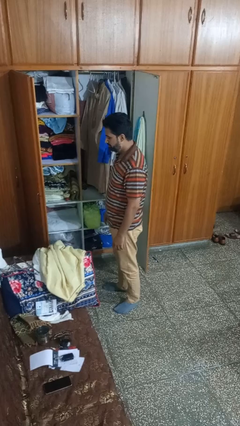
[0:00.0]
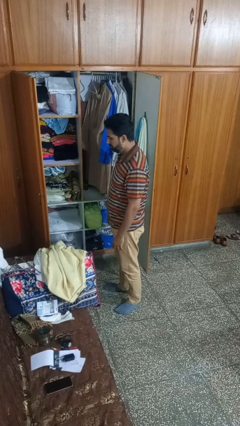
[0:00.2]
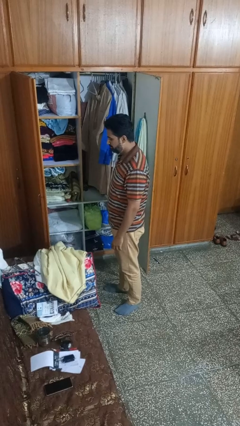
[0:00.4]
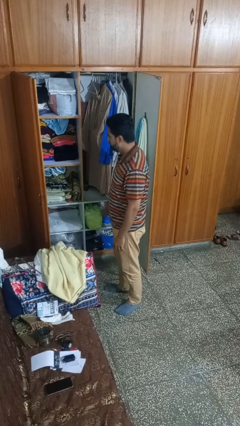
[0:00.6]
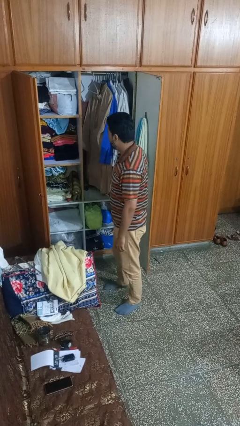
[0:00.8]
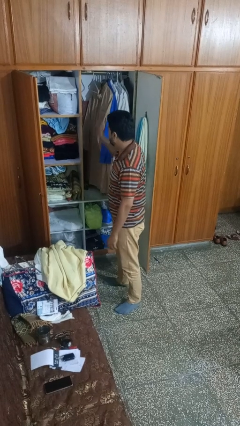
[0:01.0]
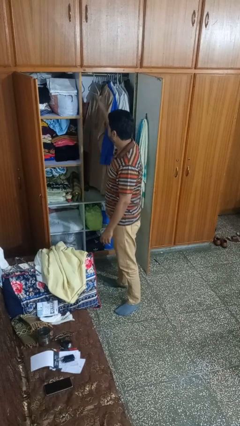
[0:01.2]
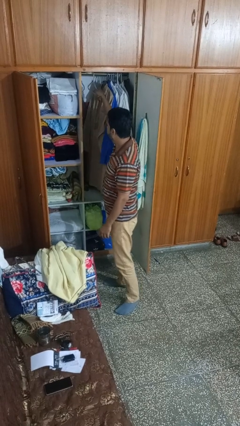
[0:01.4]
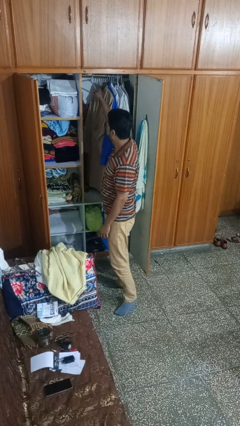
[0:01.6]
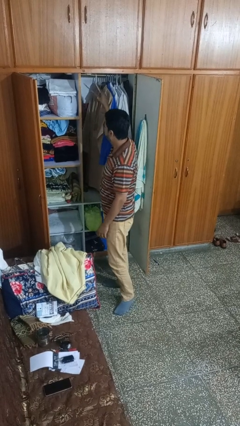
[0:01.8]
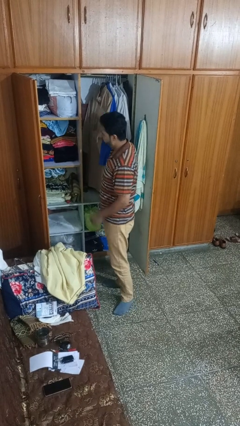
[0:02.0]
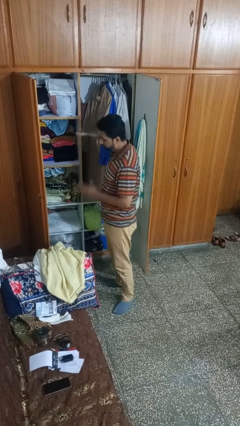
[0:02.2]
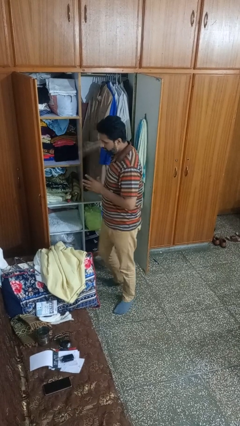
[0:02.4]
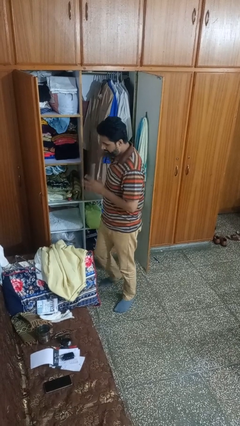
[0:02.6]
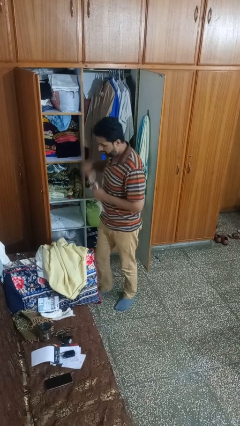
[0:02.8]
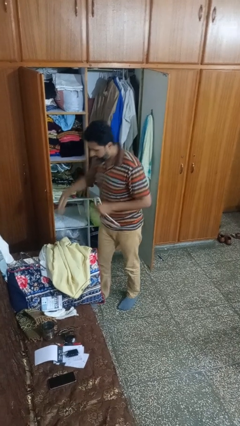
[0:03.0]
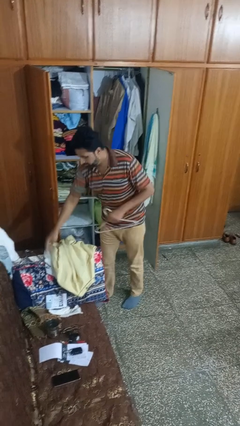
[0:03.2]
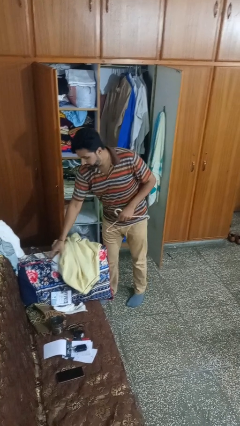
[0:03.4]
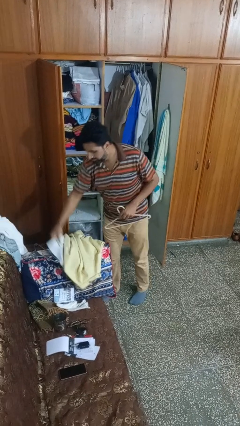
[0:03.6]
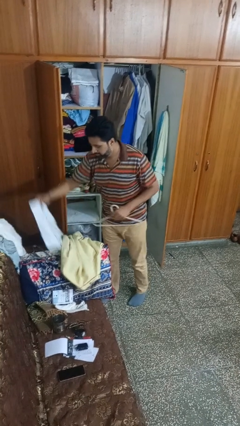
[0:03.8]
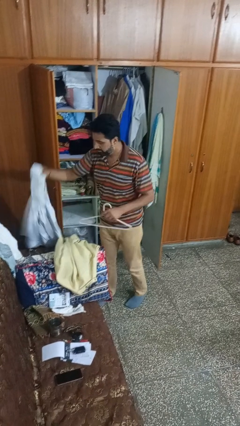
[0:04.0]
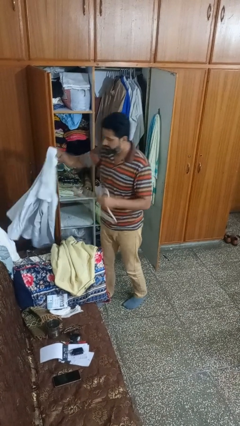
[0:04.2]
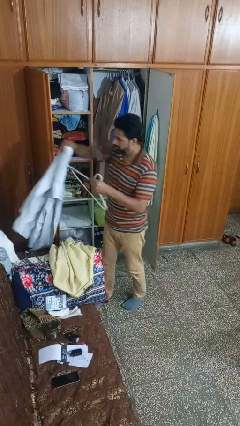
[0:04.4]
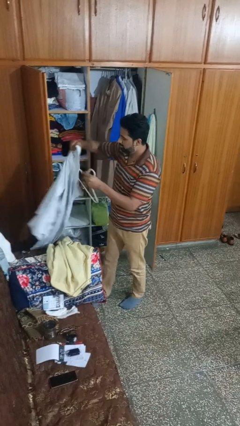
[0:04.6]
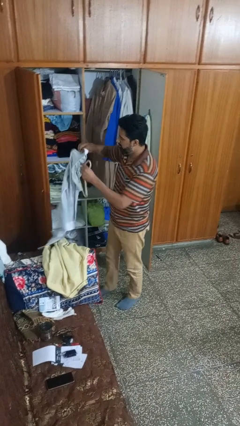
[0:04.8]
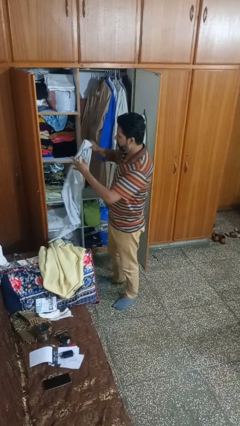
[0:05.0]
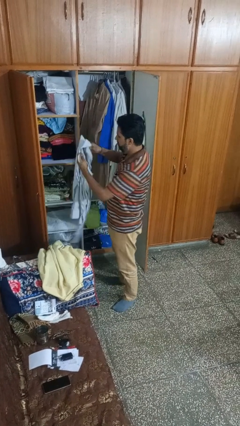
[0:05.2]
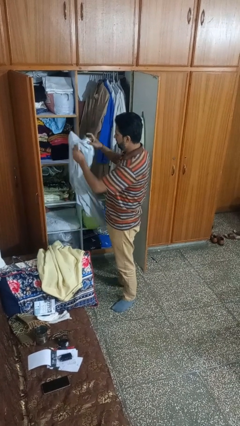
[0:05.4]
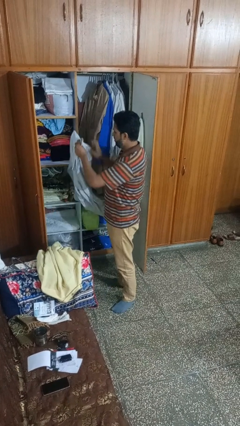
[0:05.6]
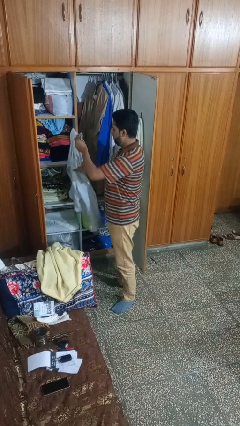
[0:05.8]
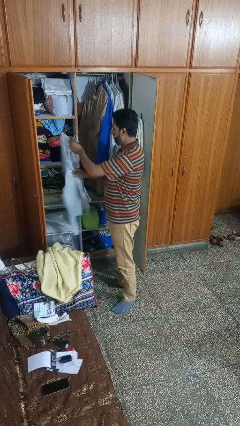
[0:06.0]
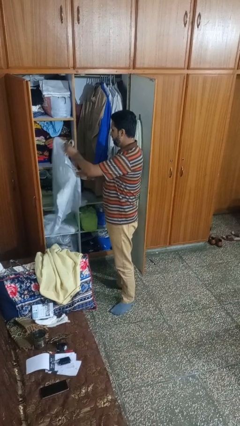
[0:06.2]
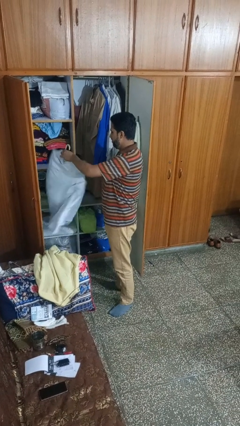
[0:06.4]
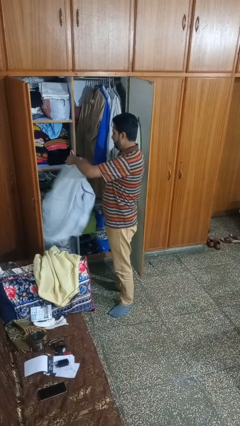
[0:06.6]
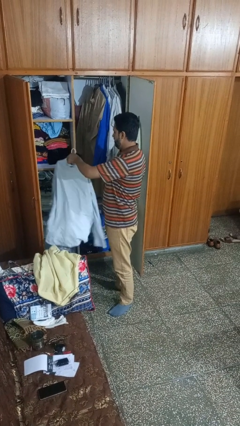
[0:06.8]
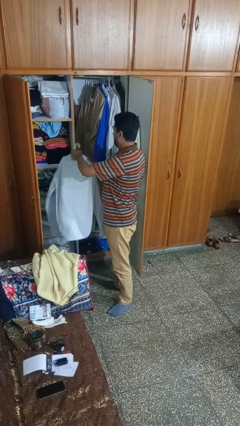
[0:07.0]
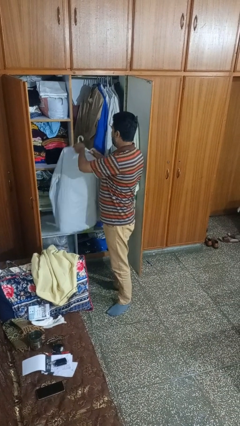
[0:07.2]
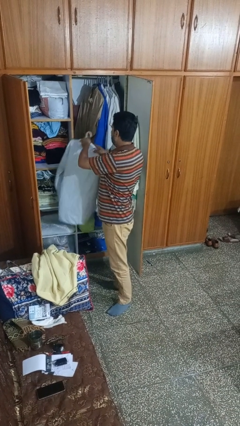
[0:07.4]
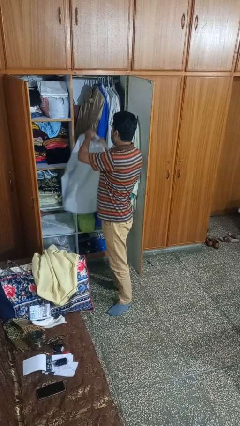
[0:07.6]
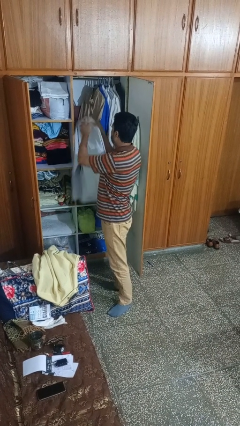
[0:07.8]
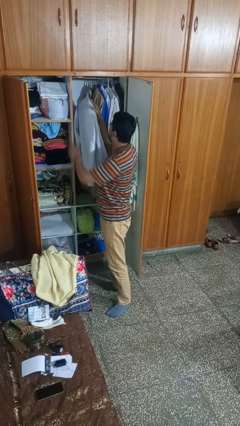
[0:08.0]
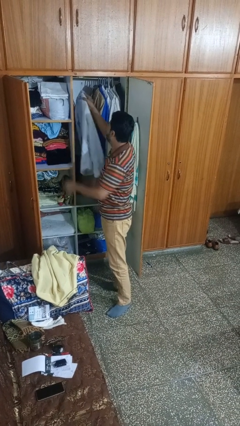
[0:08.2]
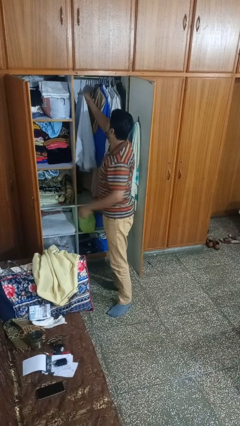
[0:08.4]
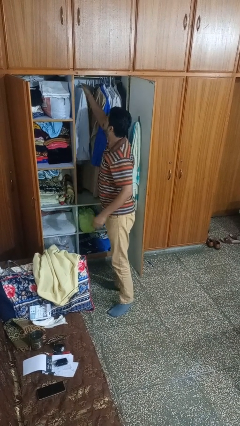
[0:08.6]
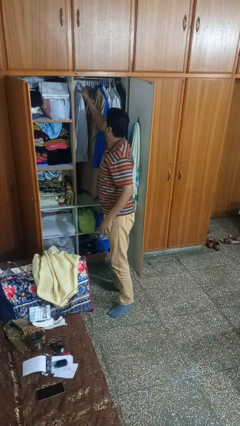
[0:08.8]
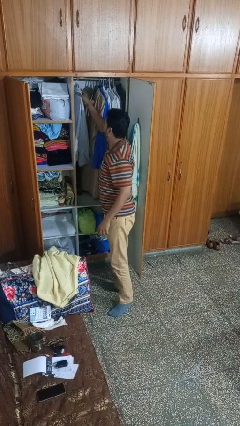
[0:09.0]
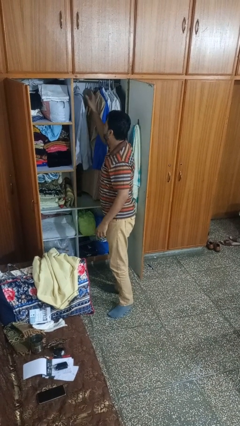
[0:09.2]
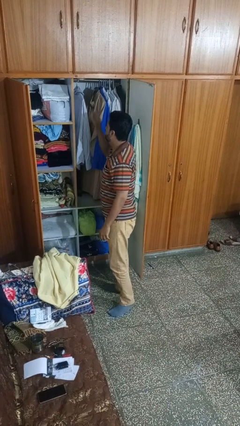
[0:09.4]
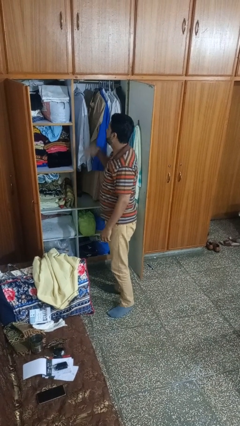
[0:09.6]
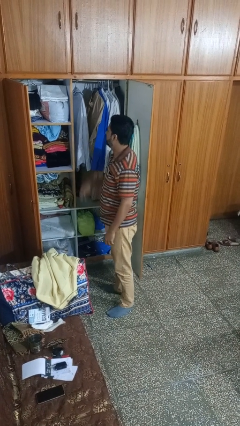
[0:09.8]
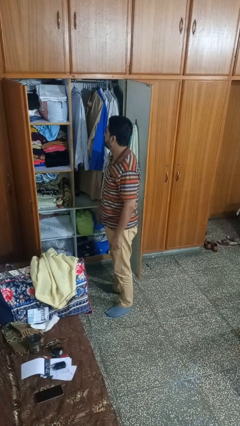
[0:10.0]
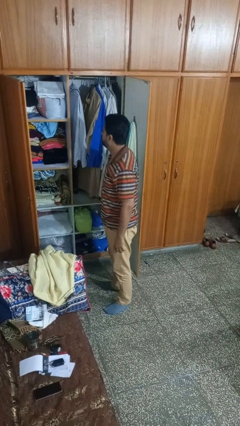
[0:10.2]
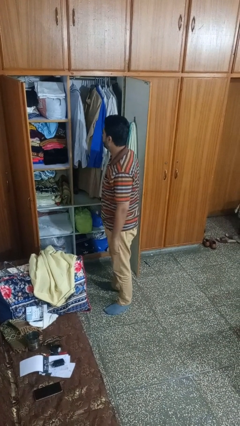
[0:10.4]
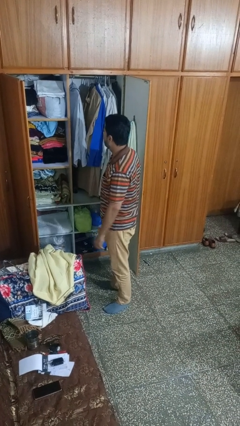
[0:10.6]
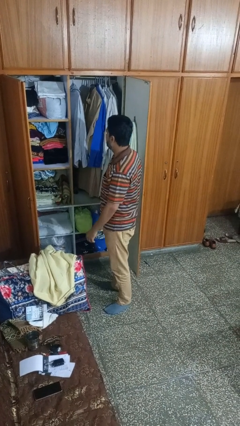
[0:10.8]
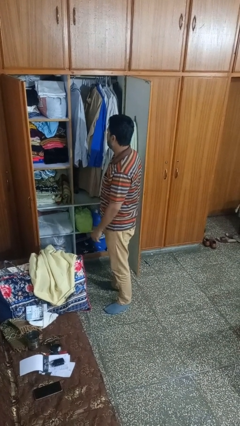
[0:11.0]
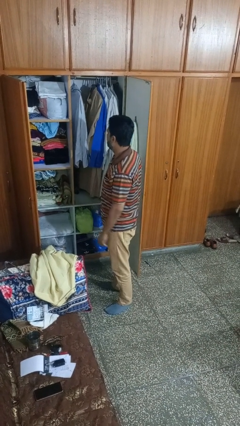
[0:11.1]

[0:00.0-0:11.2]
person puts clothes into closet

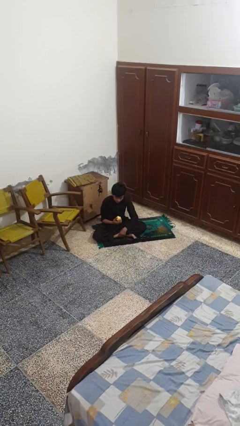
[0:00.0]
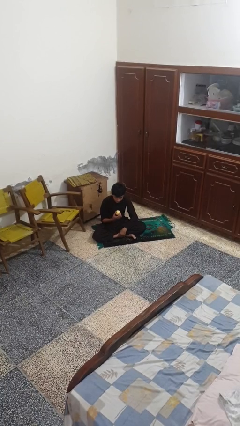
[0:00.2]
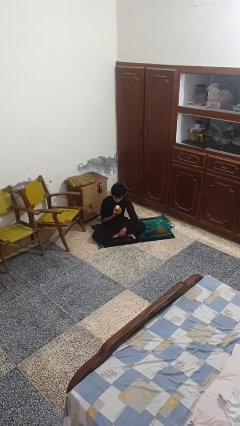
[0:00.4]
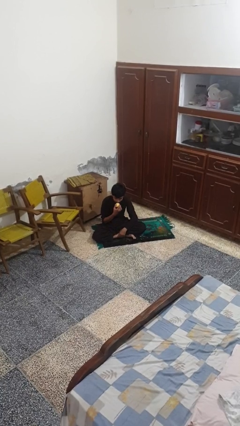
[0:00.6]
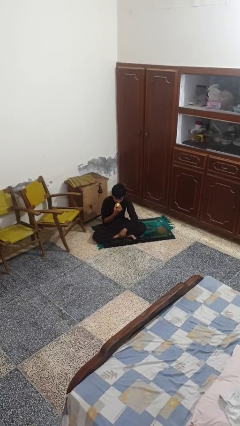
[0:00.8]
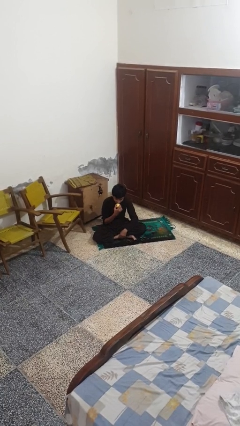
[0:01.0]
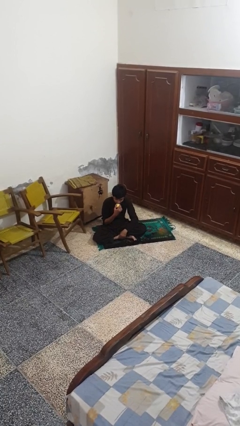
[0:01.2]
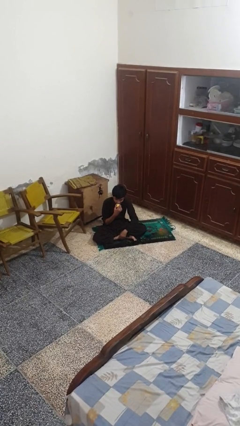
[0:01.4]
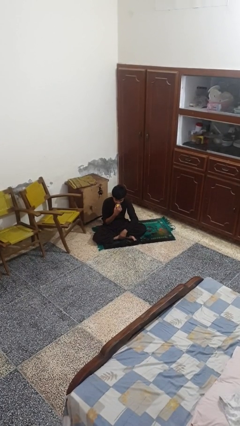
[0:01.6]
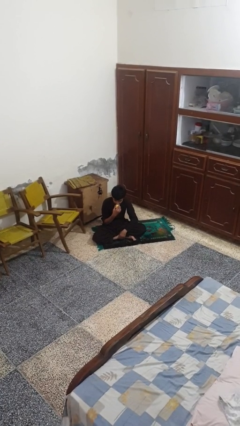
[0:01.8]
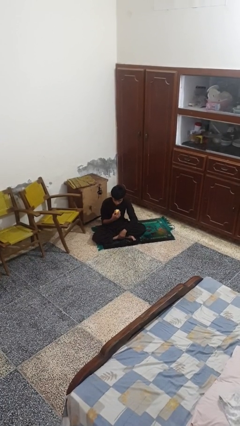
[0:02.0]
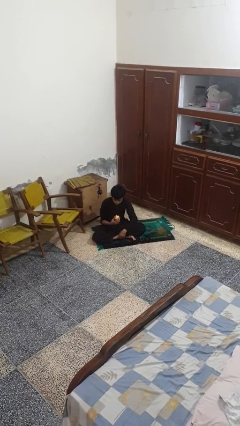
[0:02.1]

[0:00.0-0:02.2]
person eats apple

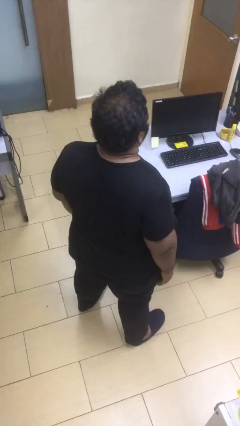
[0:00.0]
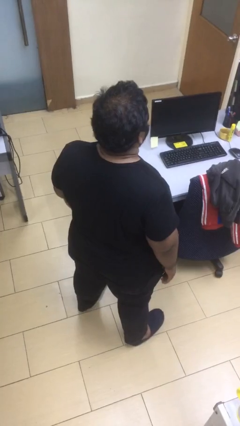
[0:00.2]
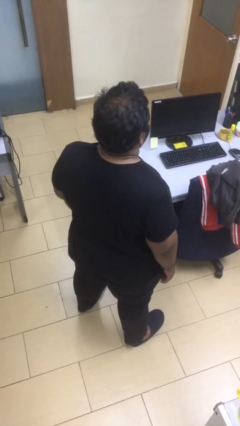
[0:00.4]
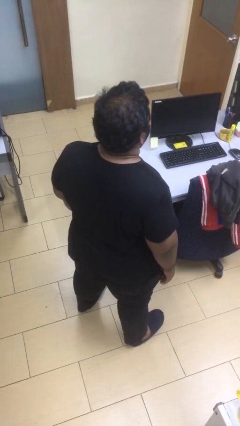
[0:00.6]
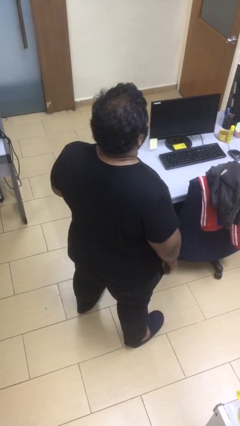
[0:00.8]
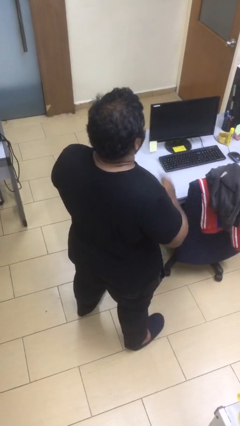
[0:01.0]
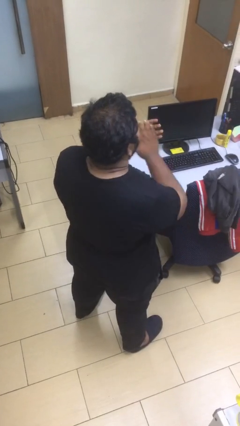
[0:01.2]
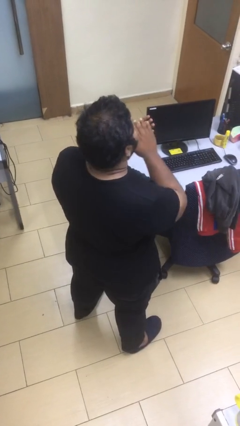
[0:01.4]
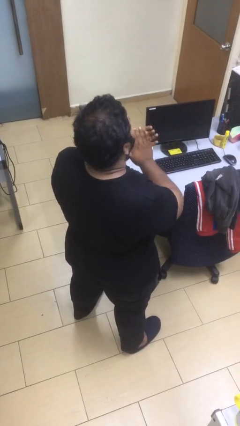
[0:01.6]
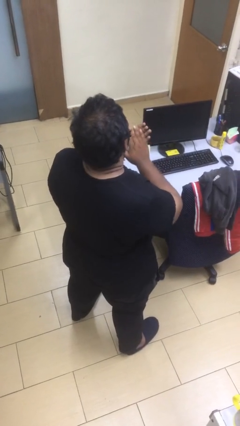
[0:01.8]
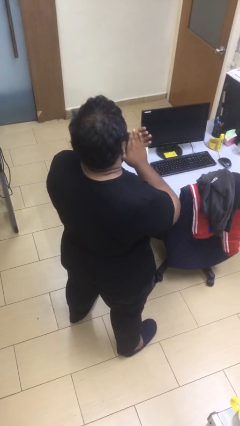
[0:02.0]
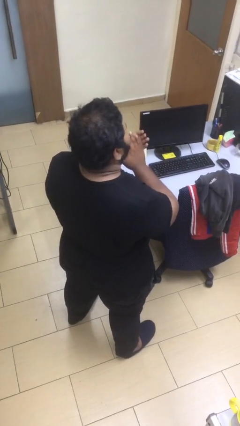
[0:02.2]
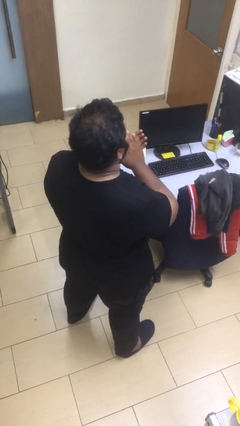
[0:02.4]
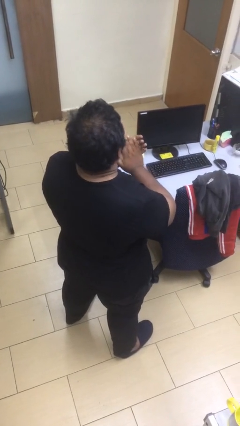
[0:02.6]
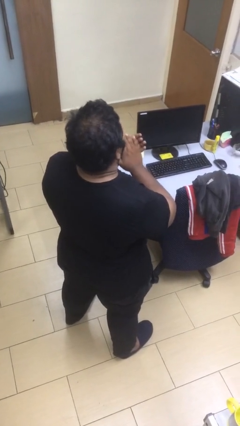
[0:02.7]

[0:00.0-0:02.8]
person claps hands

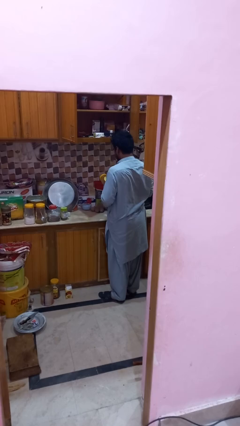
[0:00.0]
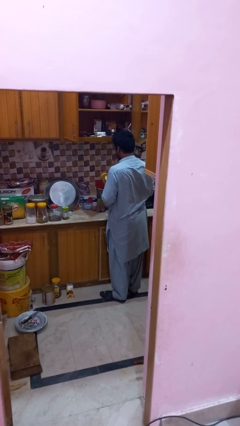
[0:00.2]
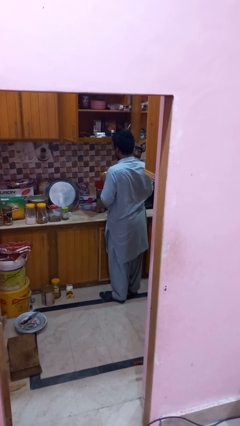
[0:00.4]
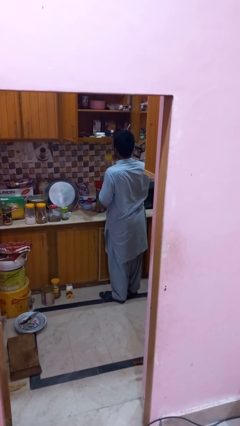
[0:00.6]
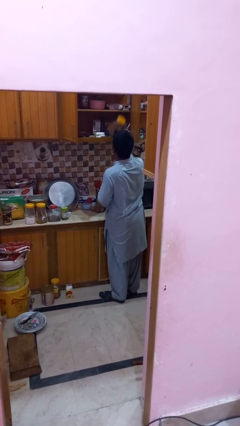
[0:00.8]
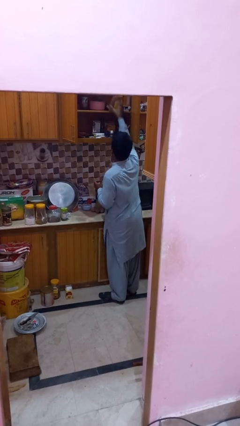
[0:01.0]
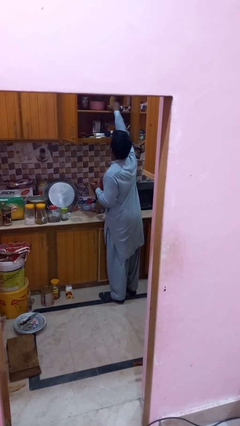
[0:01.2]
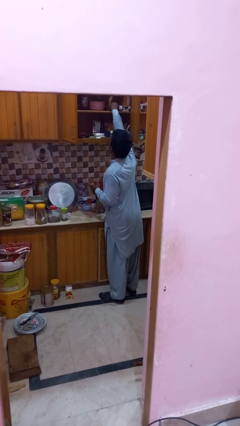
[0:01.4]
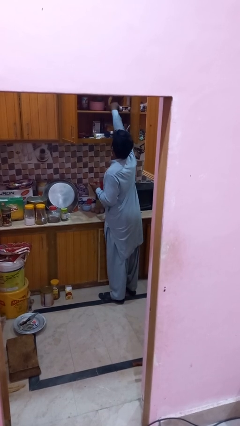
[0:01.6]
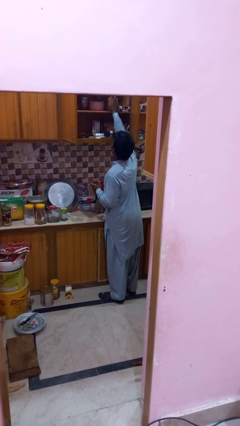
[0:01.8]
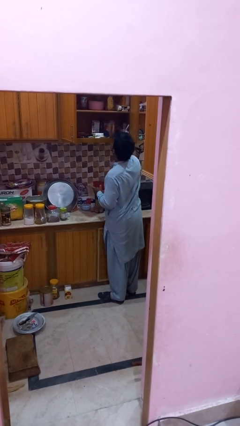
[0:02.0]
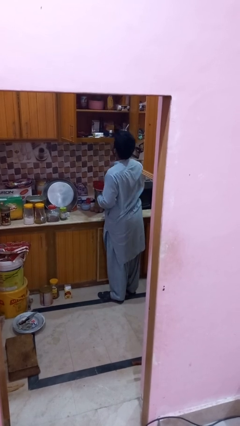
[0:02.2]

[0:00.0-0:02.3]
person puts object in cabinet
